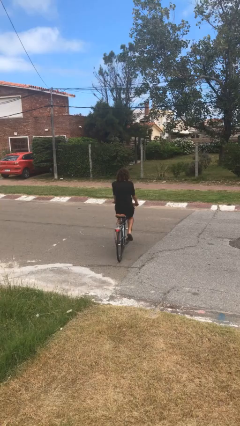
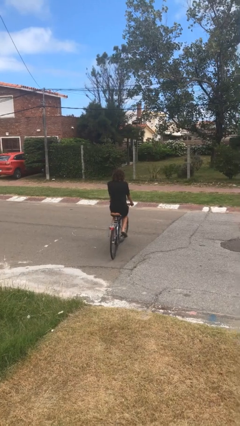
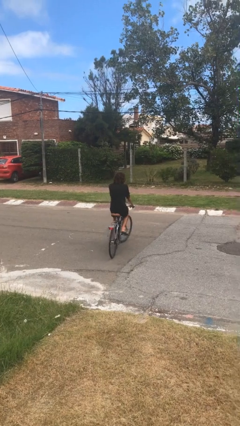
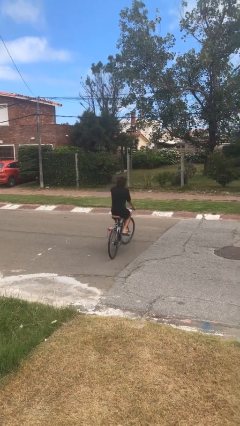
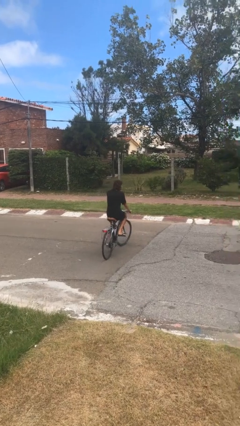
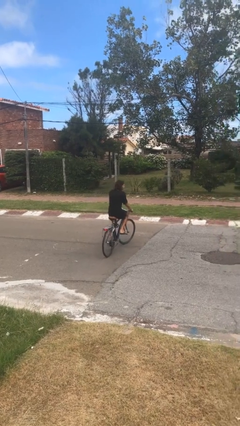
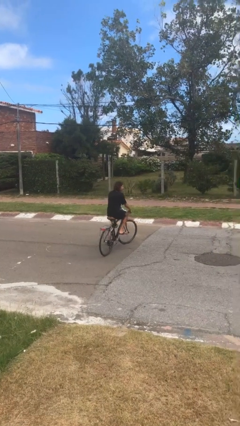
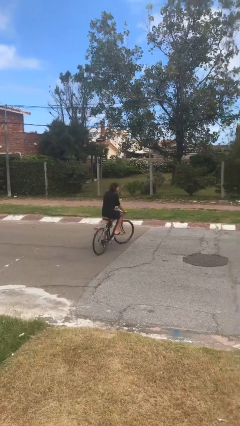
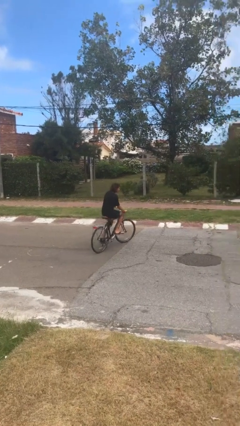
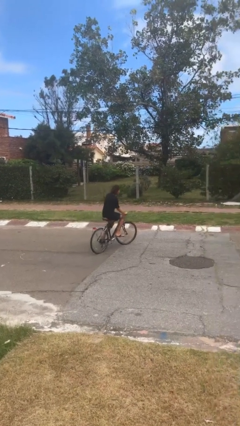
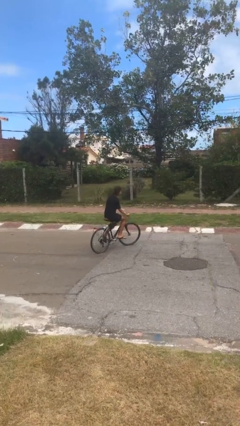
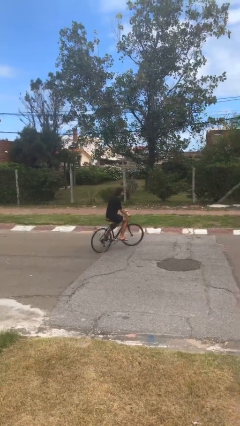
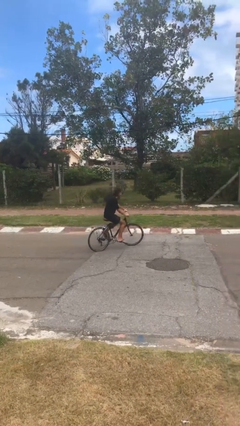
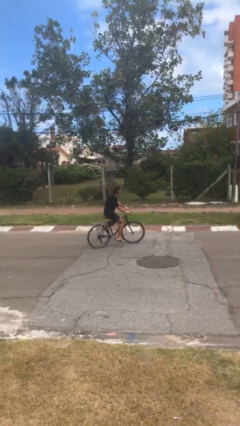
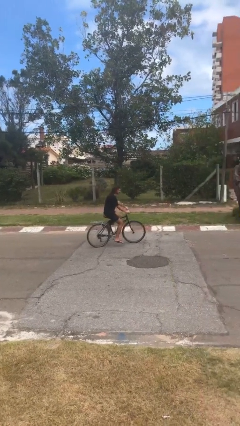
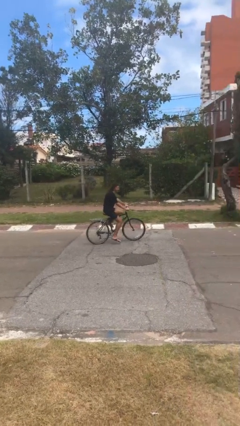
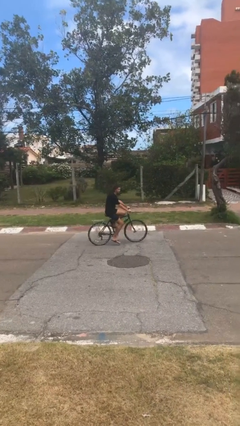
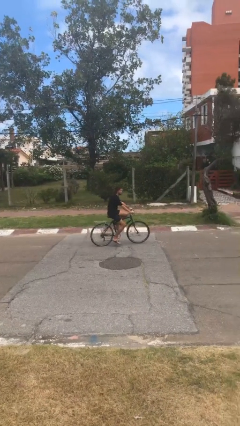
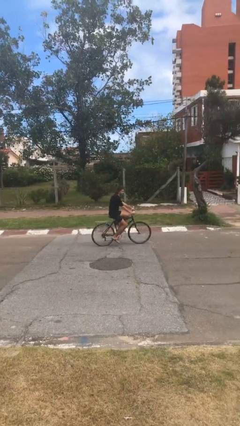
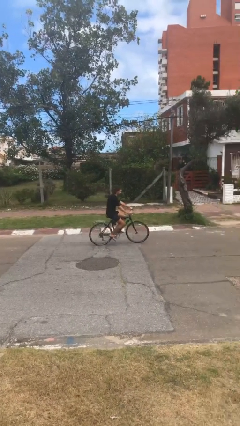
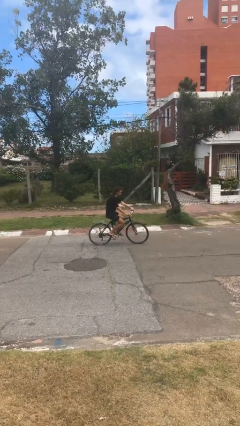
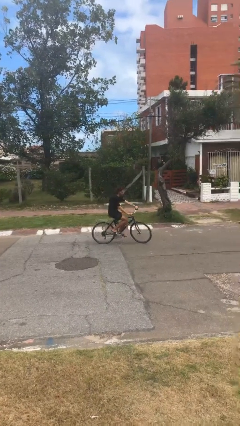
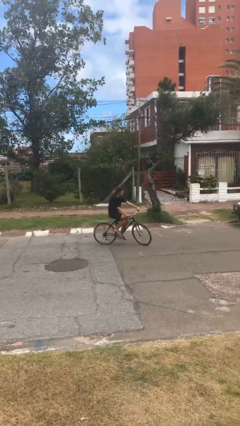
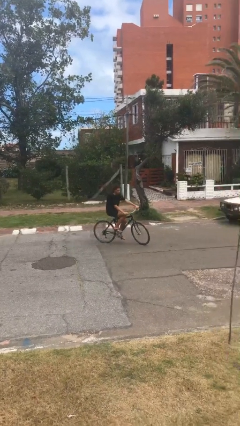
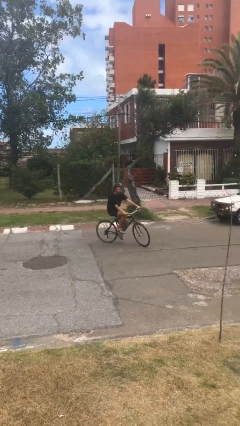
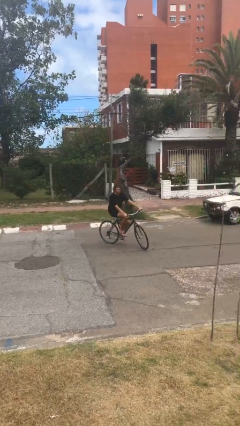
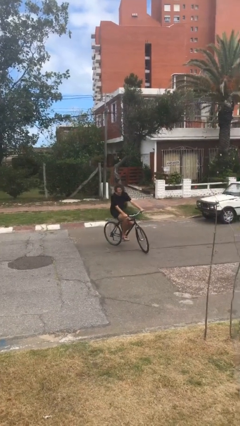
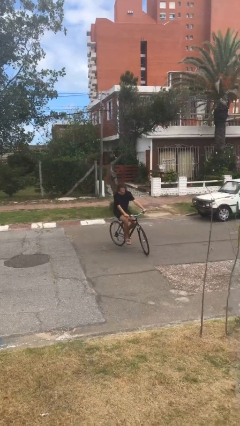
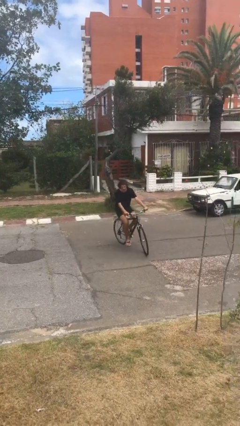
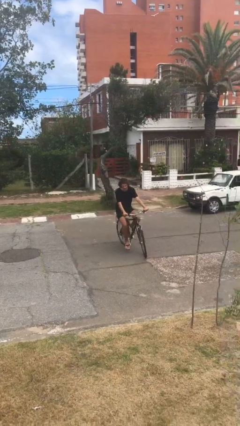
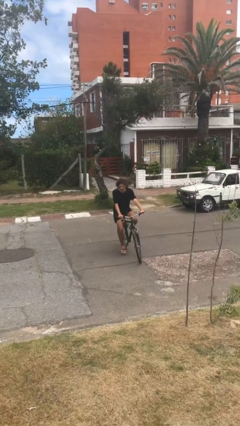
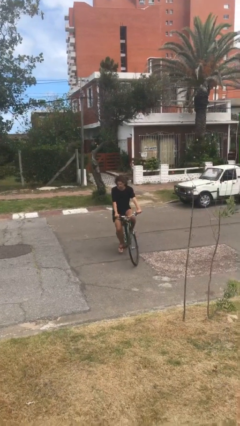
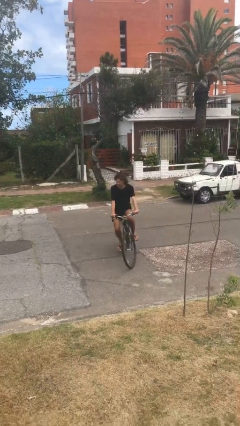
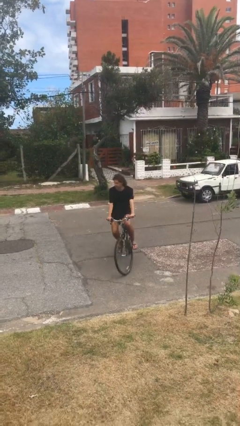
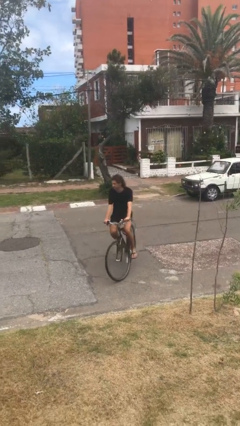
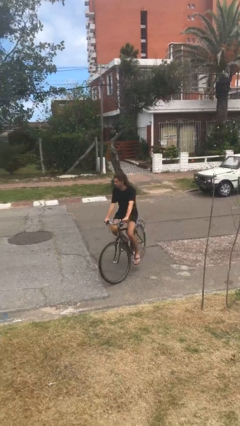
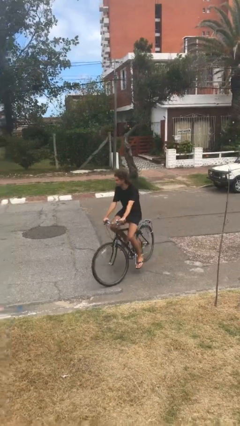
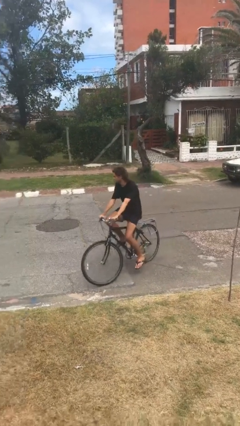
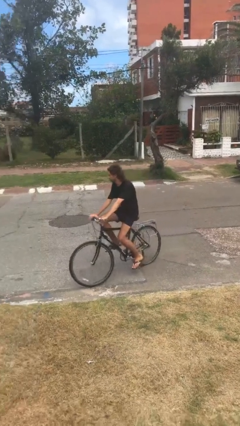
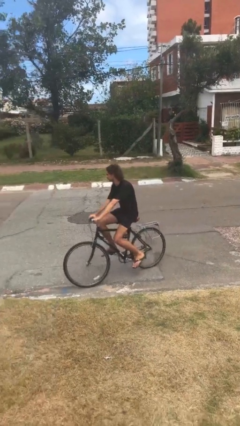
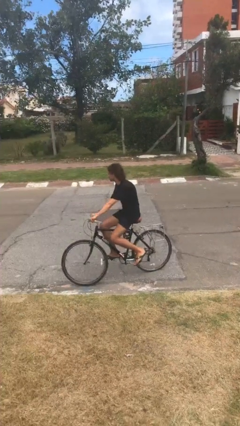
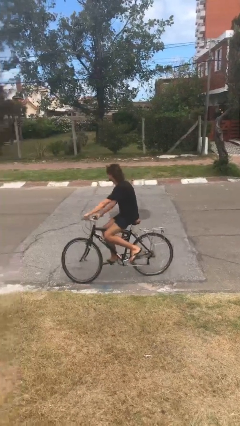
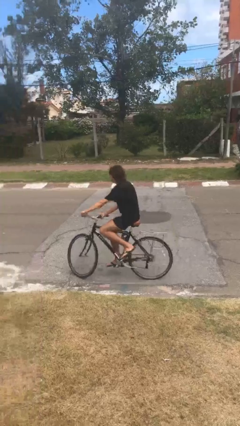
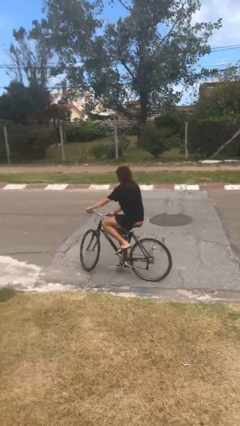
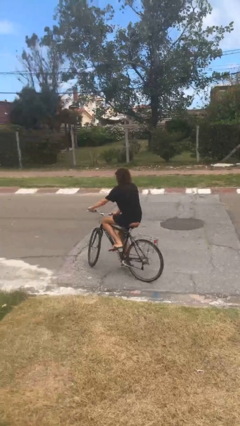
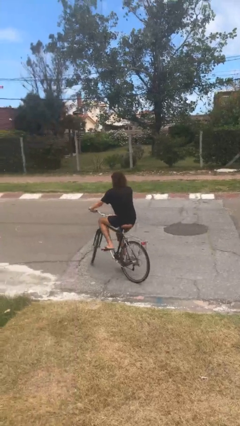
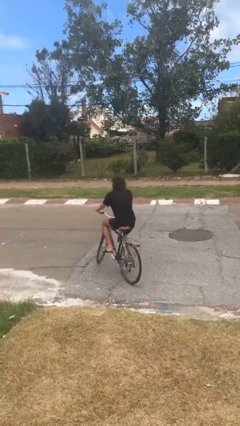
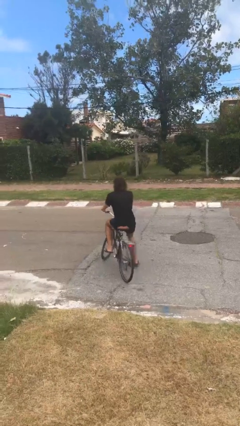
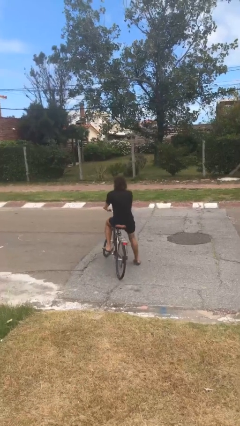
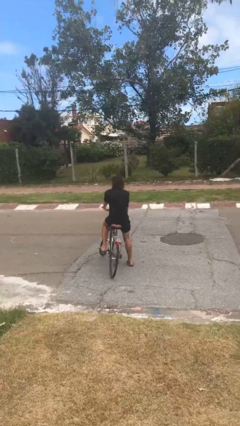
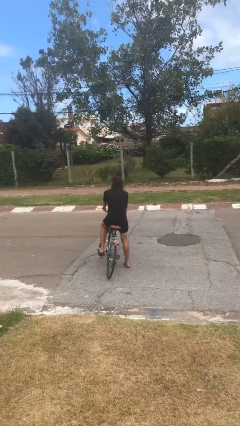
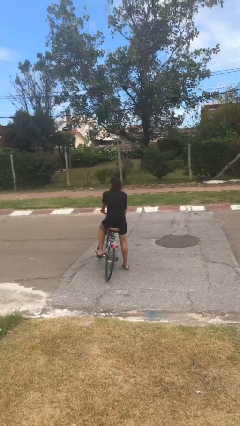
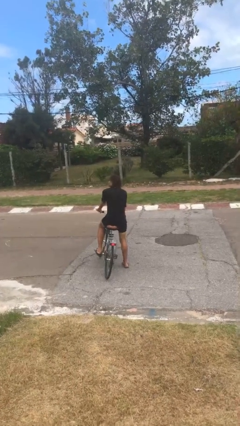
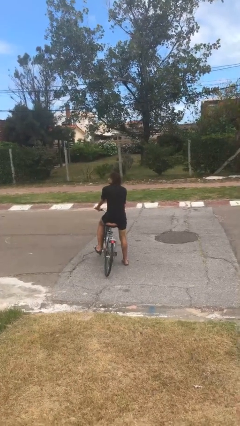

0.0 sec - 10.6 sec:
person rides bicycle

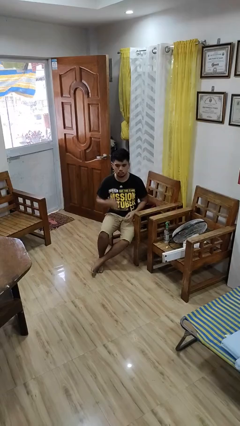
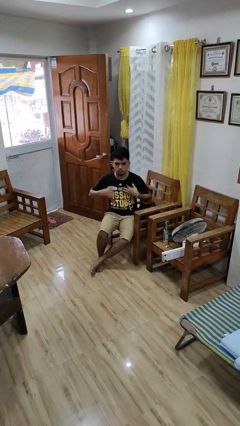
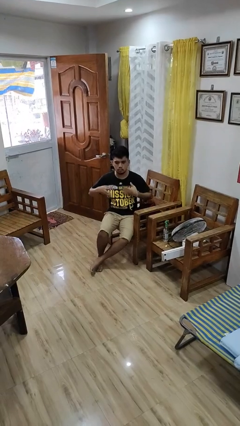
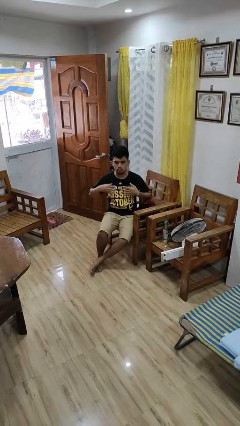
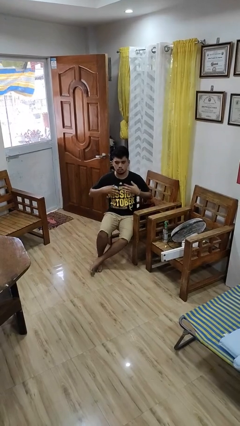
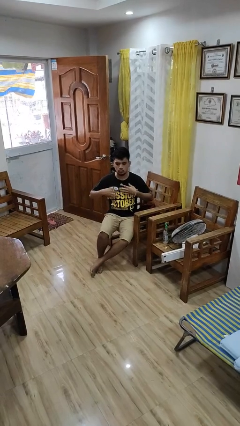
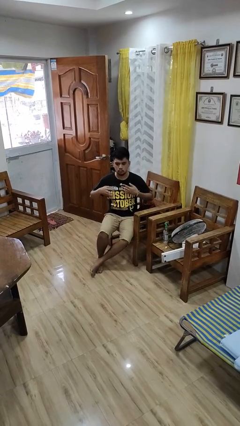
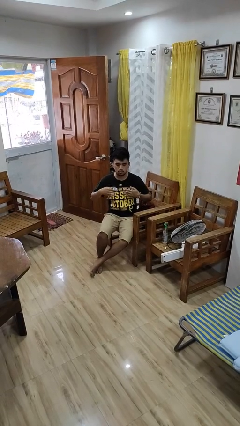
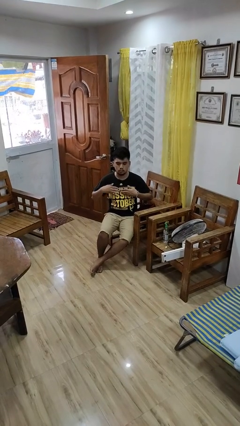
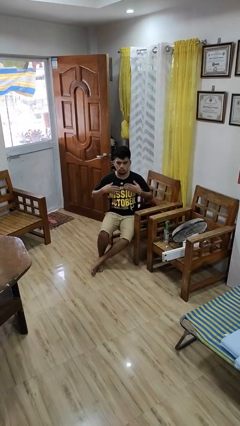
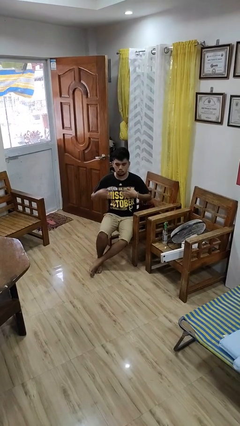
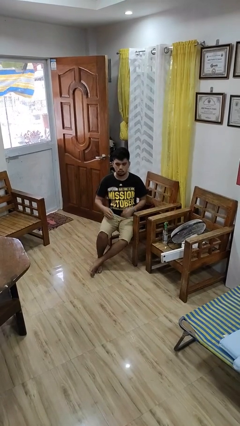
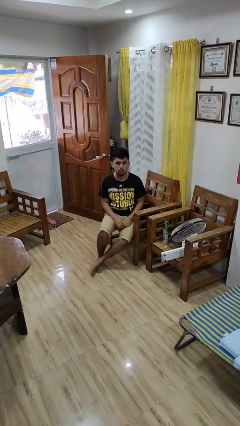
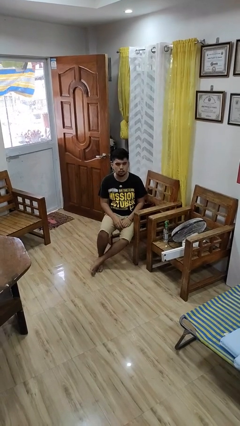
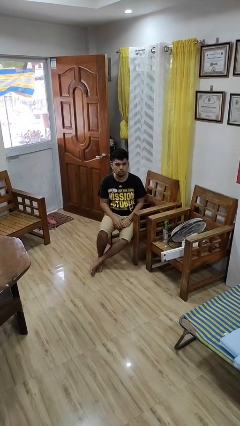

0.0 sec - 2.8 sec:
person drums on chest

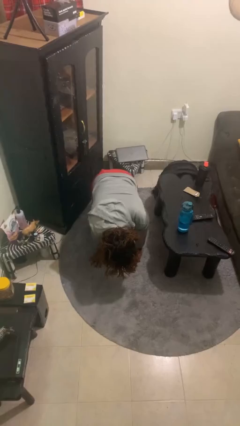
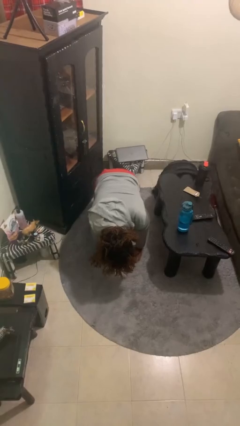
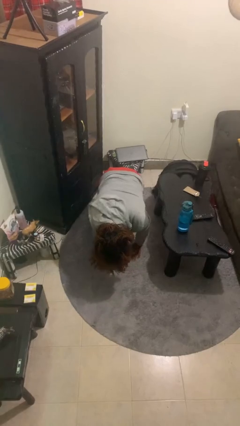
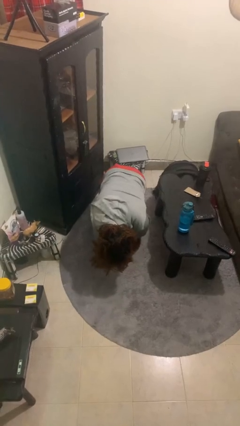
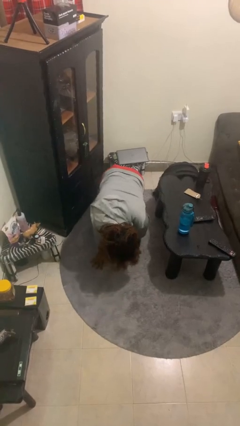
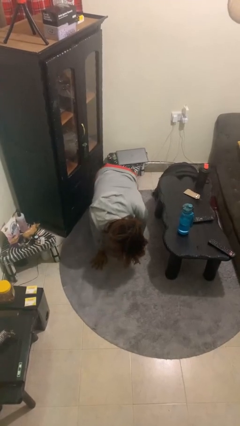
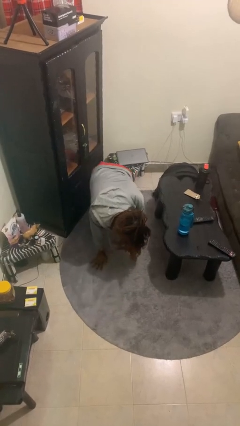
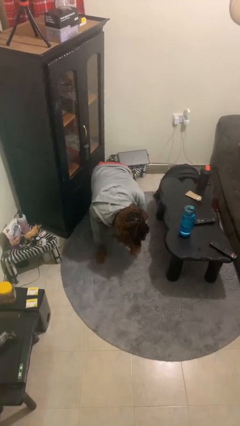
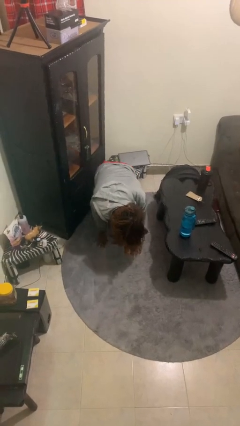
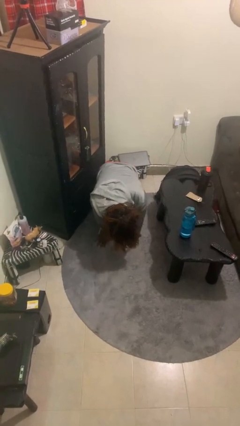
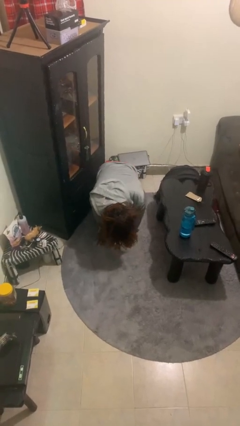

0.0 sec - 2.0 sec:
person crawls

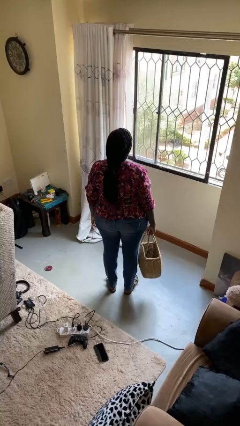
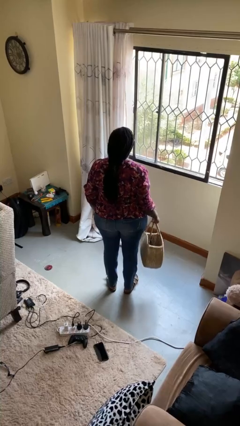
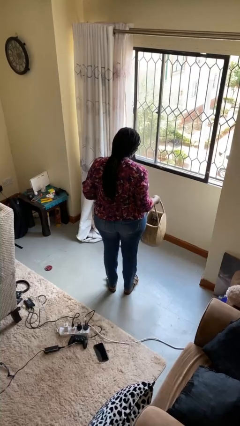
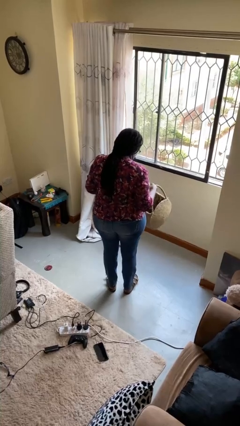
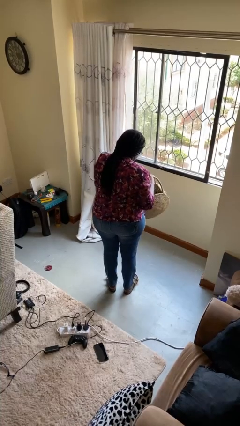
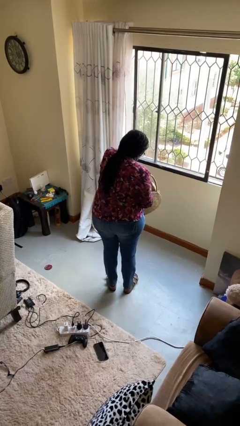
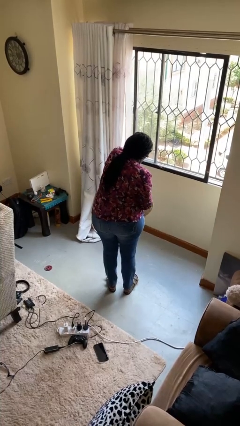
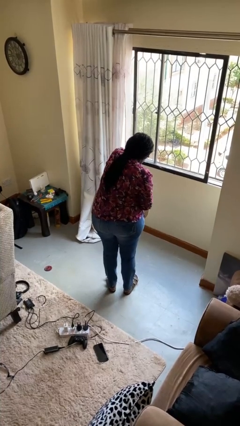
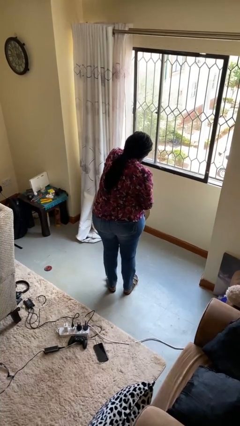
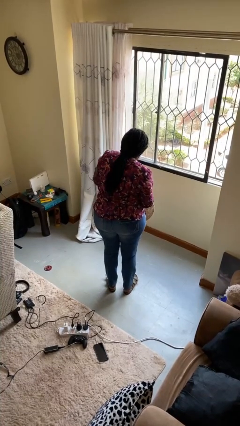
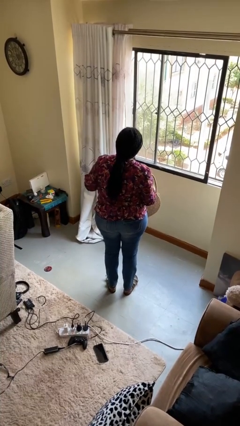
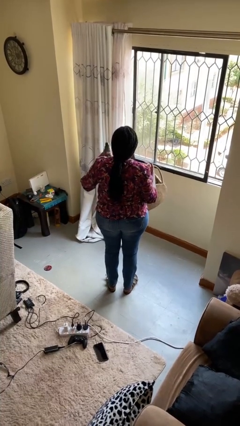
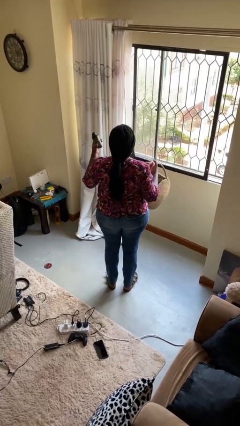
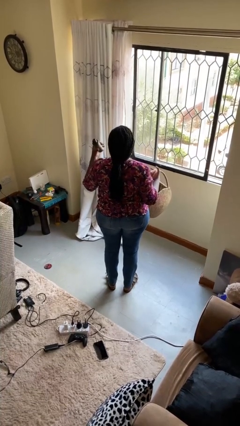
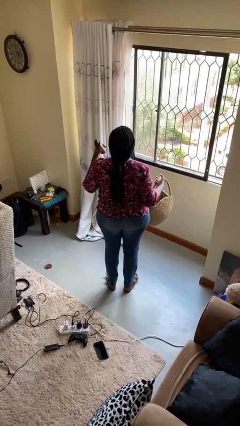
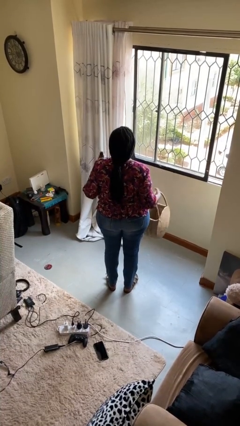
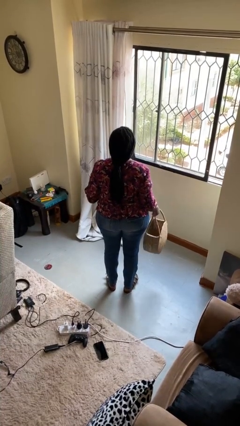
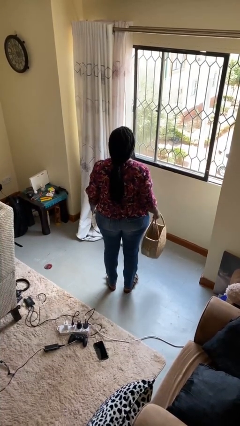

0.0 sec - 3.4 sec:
person takes object from basket
